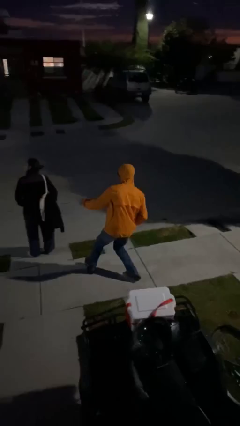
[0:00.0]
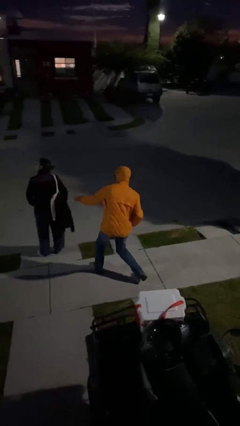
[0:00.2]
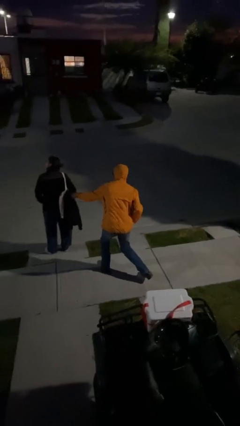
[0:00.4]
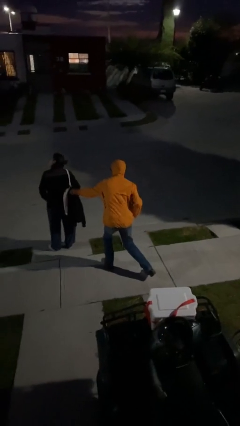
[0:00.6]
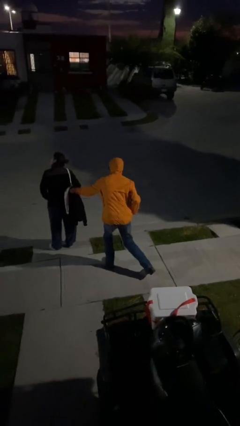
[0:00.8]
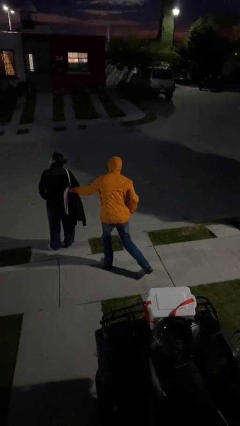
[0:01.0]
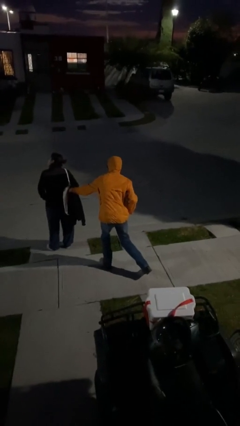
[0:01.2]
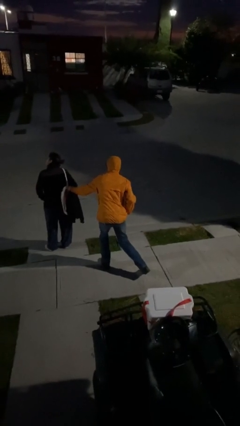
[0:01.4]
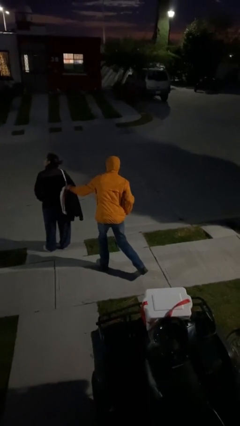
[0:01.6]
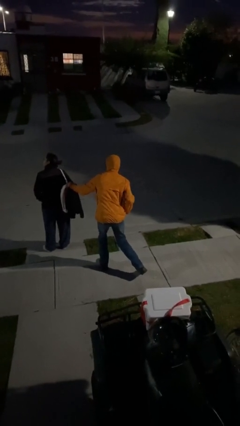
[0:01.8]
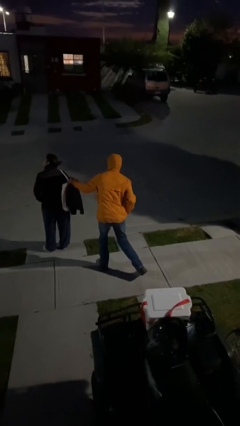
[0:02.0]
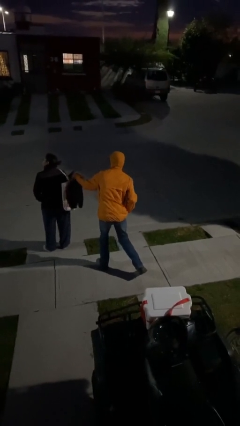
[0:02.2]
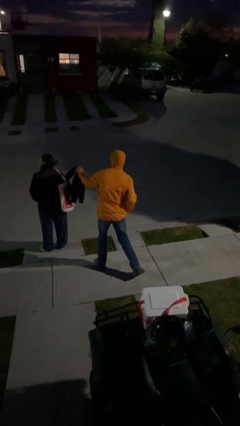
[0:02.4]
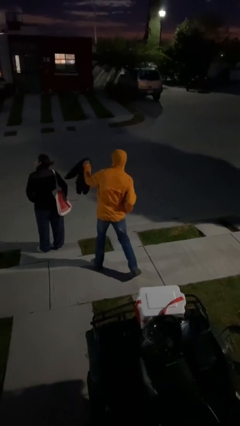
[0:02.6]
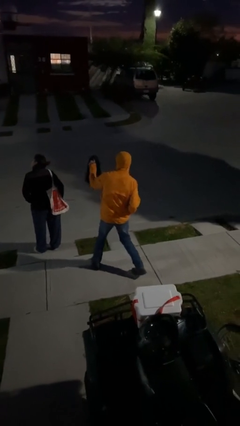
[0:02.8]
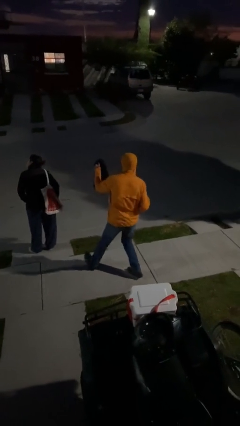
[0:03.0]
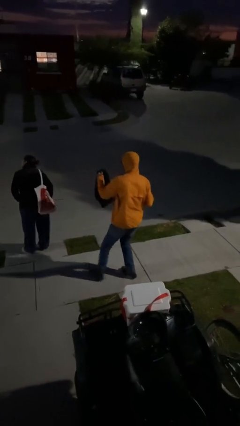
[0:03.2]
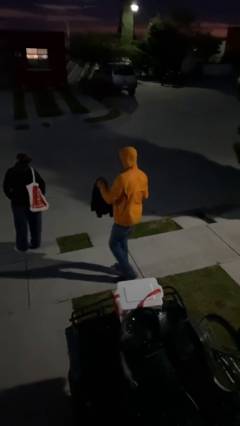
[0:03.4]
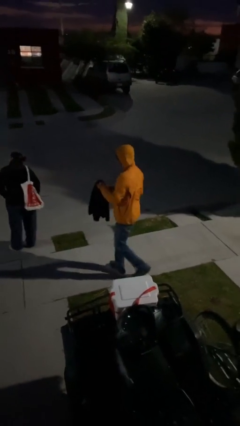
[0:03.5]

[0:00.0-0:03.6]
person steals object from person

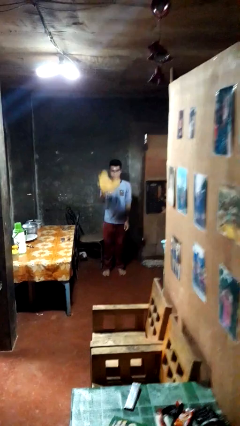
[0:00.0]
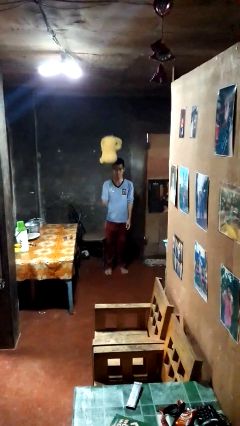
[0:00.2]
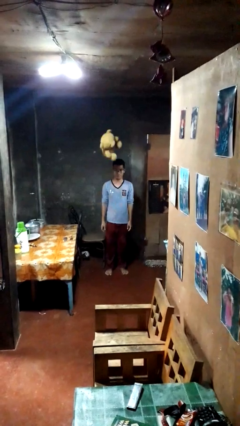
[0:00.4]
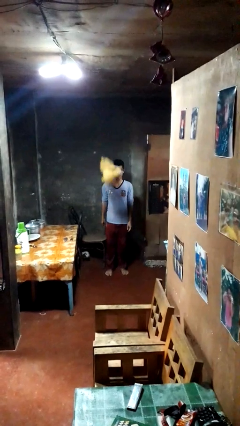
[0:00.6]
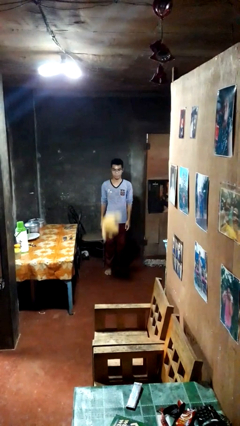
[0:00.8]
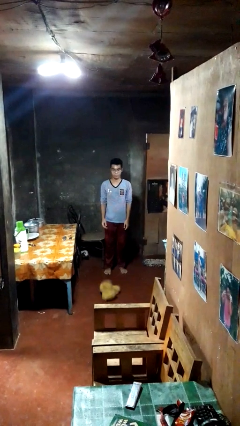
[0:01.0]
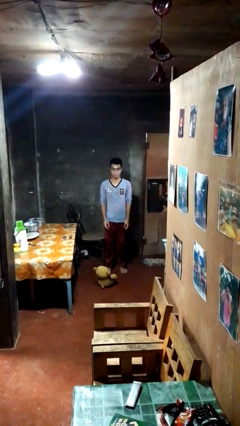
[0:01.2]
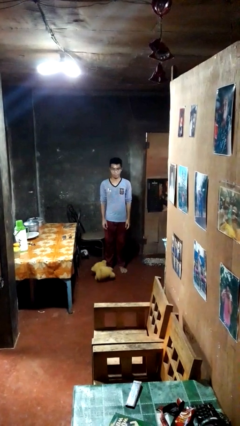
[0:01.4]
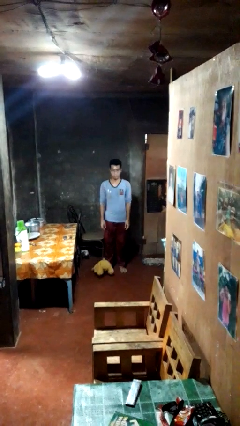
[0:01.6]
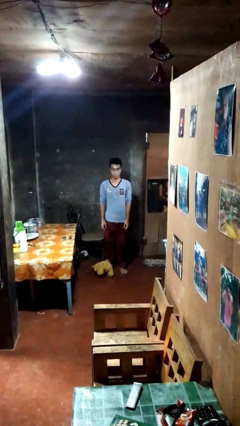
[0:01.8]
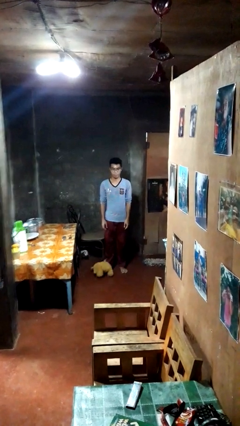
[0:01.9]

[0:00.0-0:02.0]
person throws object into air

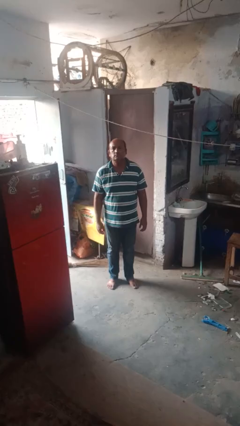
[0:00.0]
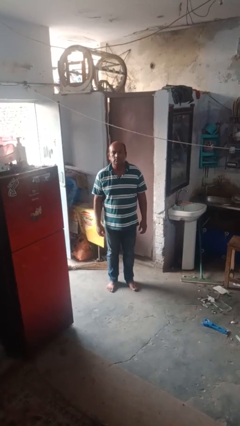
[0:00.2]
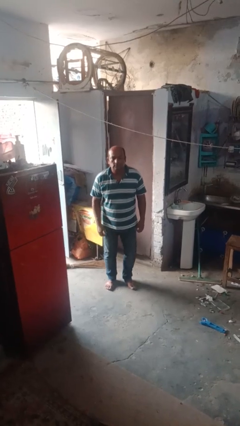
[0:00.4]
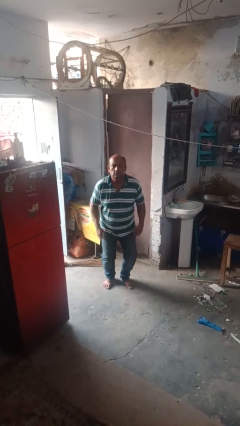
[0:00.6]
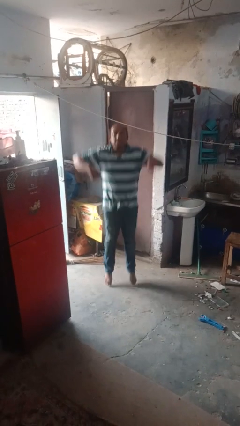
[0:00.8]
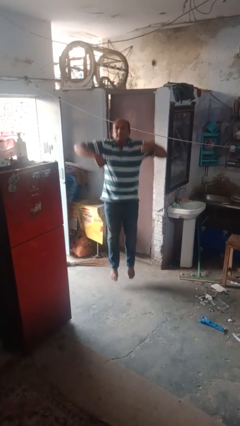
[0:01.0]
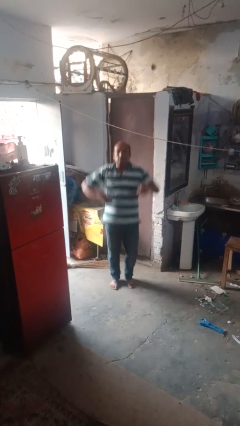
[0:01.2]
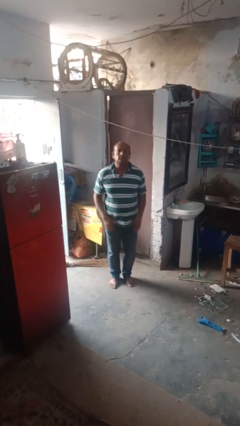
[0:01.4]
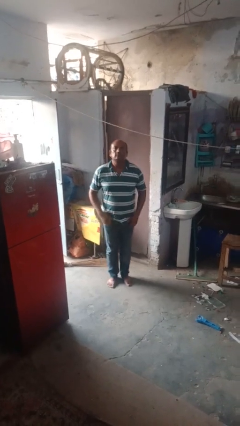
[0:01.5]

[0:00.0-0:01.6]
person jumps

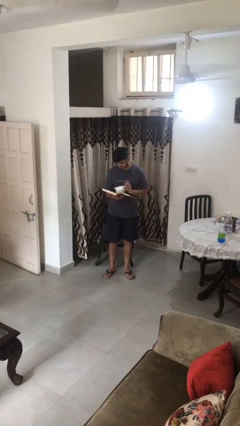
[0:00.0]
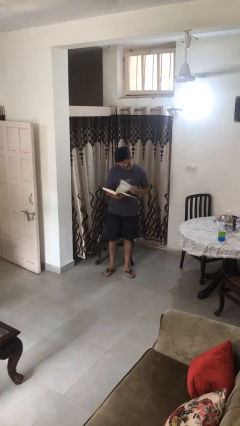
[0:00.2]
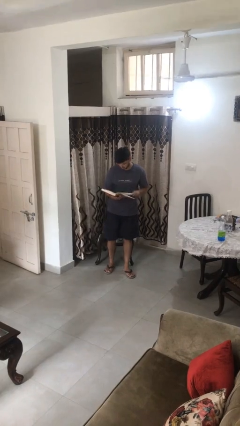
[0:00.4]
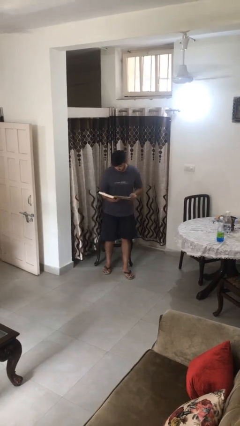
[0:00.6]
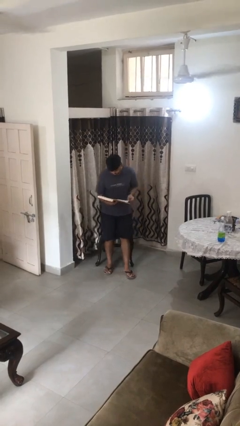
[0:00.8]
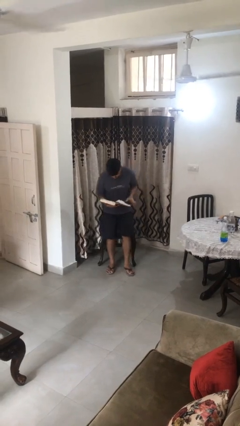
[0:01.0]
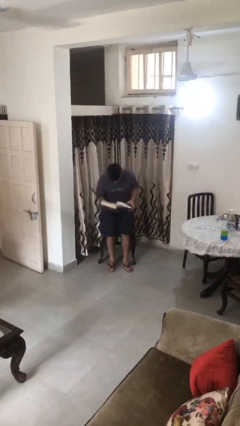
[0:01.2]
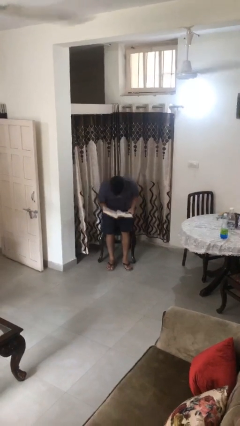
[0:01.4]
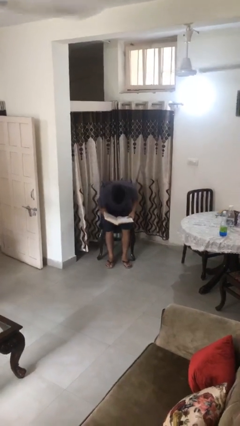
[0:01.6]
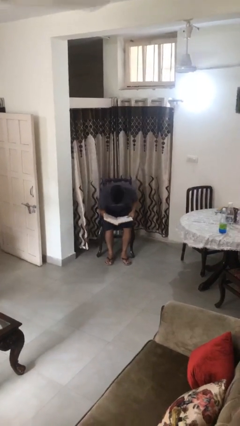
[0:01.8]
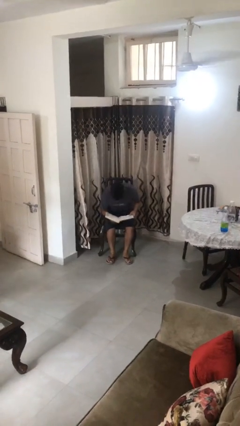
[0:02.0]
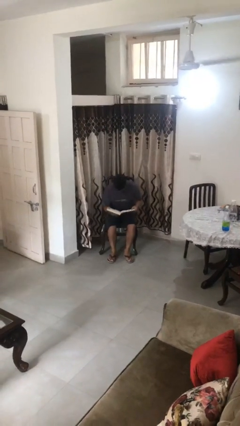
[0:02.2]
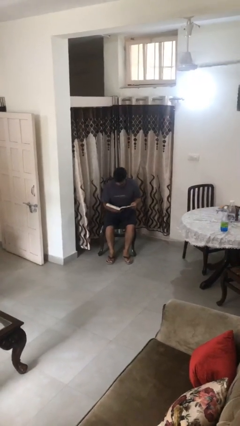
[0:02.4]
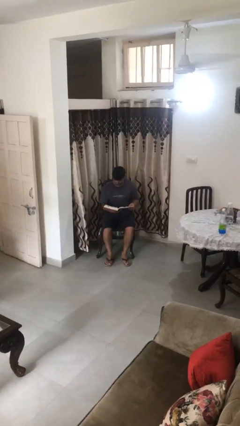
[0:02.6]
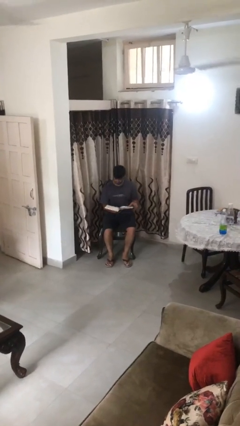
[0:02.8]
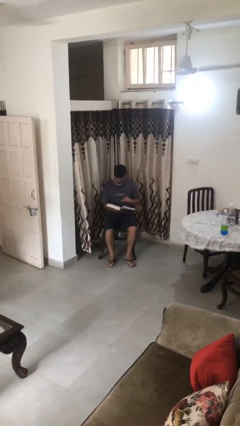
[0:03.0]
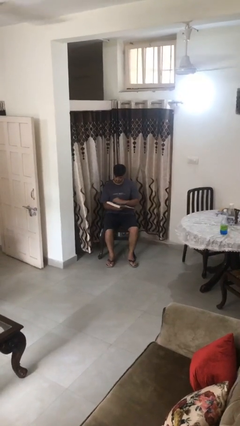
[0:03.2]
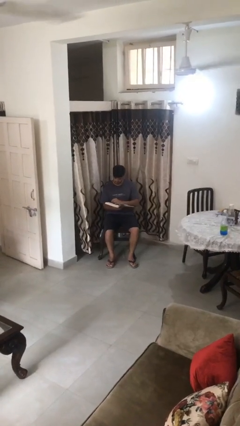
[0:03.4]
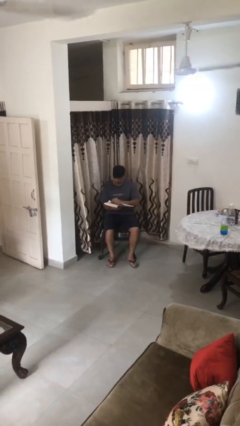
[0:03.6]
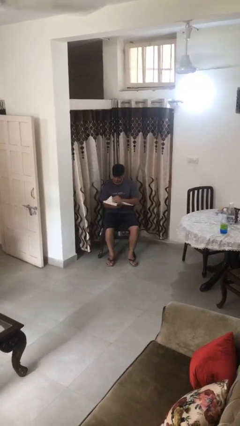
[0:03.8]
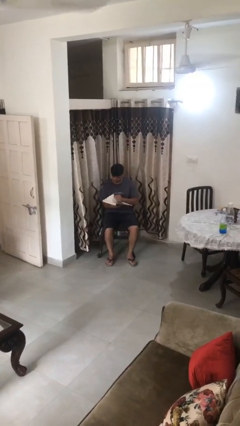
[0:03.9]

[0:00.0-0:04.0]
person sits down

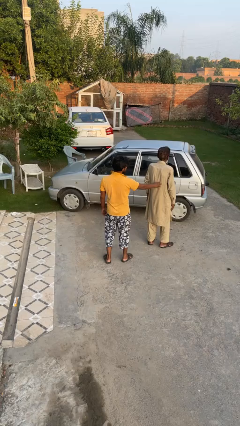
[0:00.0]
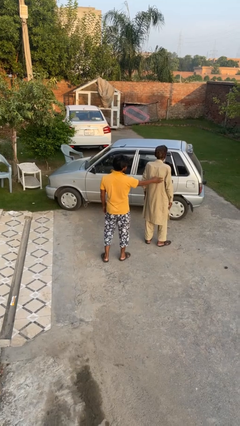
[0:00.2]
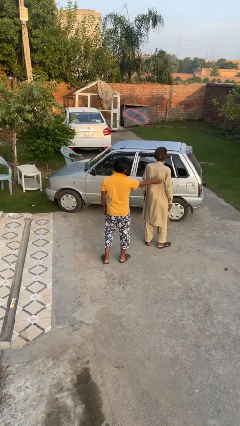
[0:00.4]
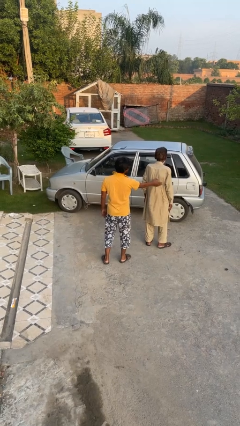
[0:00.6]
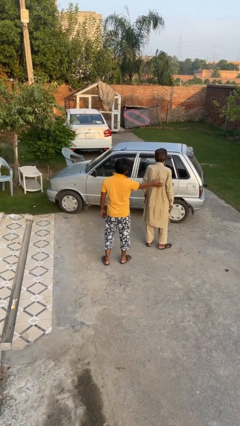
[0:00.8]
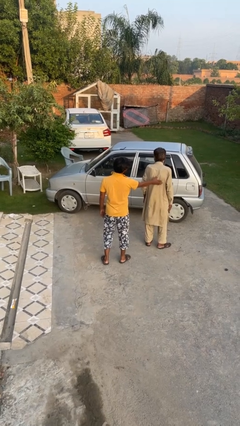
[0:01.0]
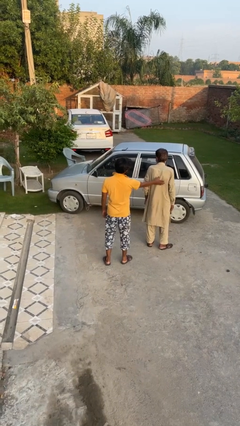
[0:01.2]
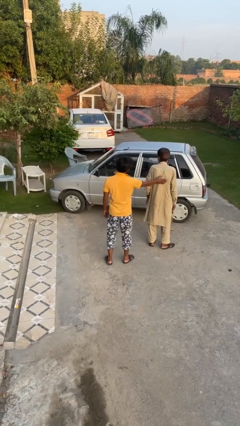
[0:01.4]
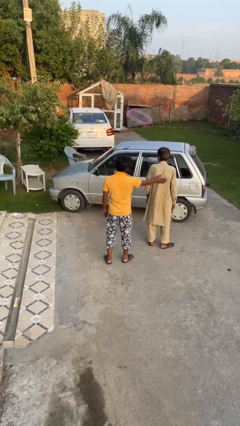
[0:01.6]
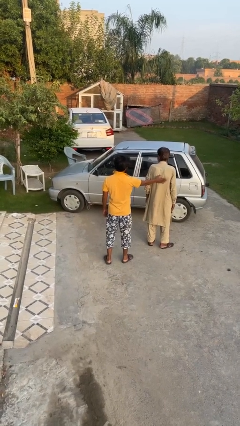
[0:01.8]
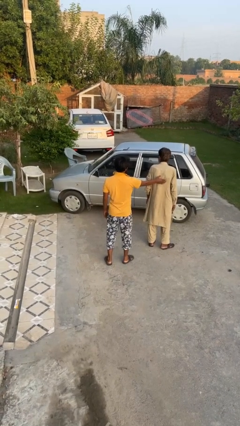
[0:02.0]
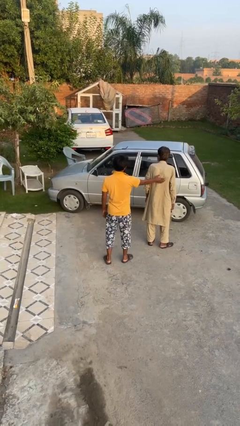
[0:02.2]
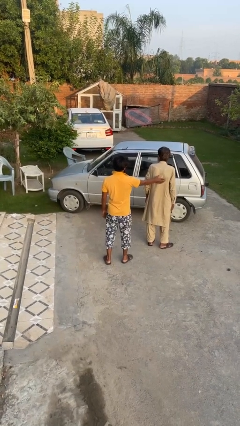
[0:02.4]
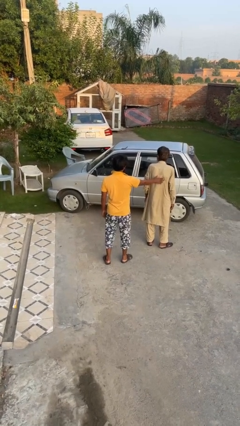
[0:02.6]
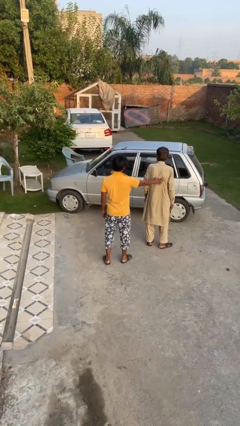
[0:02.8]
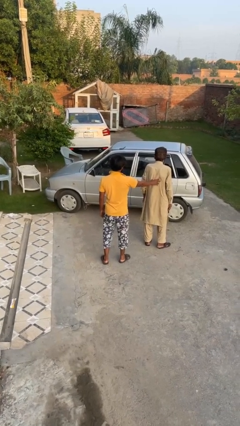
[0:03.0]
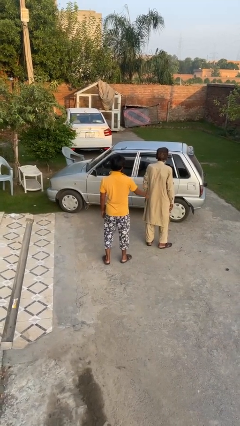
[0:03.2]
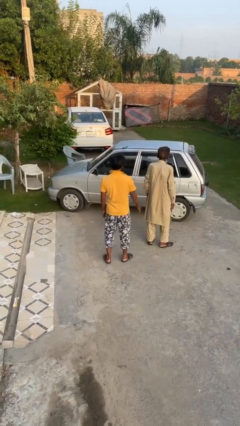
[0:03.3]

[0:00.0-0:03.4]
person touches back of person

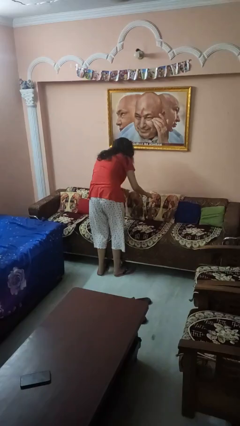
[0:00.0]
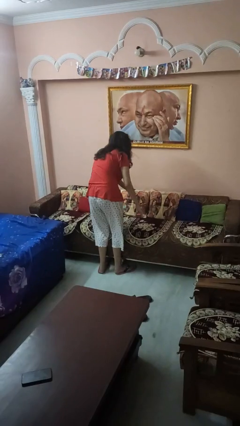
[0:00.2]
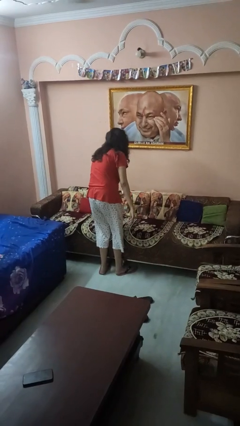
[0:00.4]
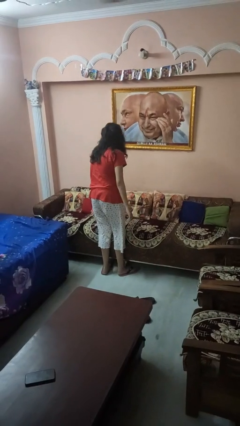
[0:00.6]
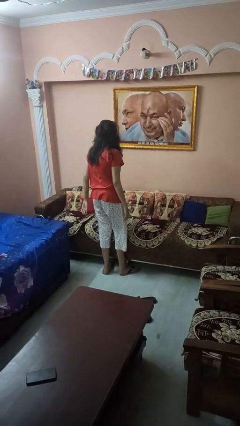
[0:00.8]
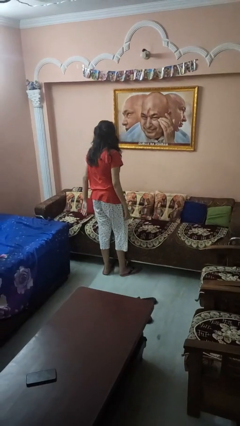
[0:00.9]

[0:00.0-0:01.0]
person searches in couch

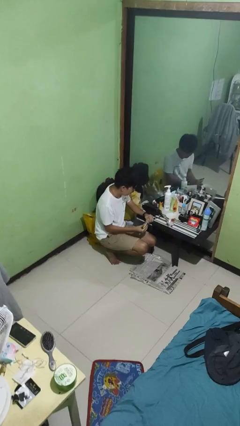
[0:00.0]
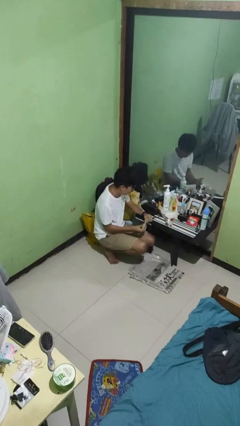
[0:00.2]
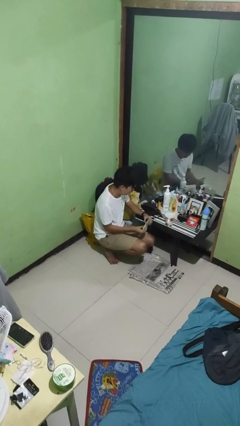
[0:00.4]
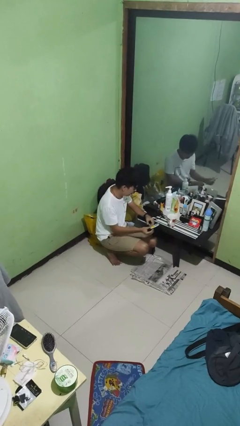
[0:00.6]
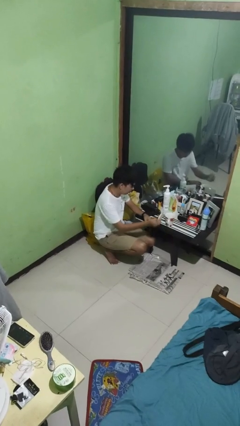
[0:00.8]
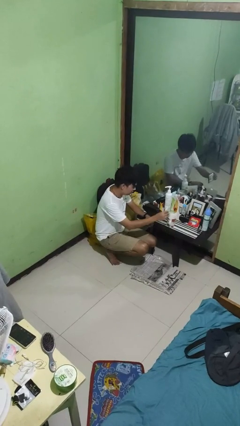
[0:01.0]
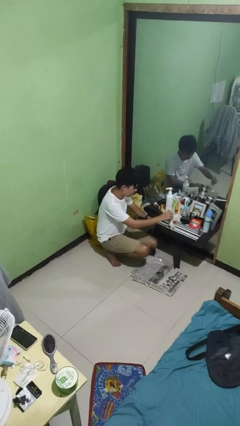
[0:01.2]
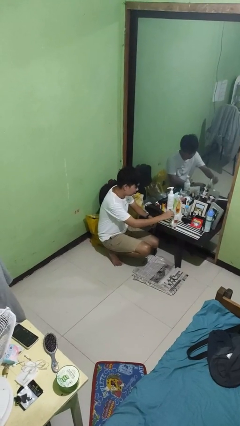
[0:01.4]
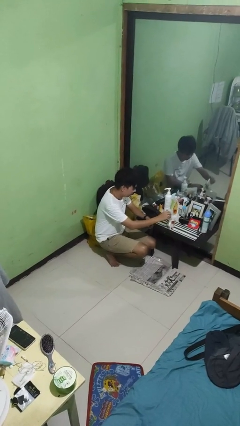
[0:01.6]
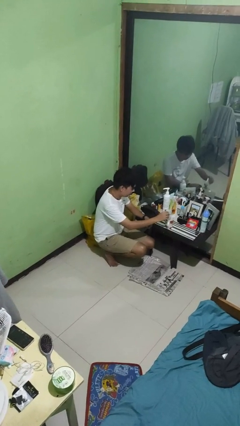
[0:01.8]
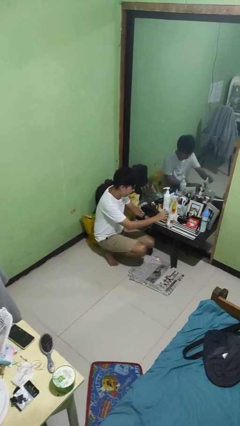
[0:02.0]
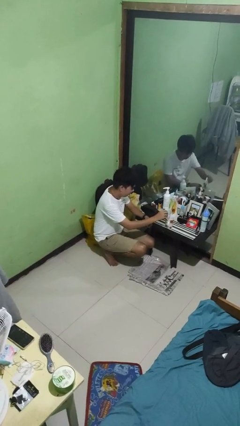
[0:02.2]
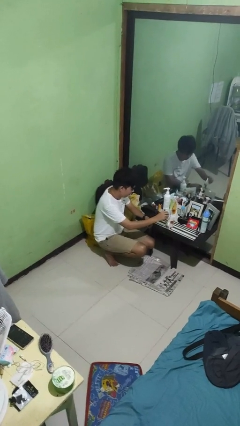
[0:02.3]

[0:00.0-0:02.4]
person pours coffee into mug
